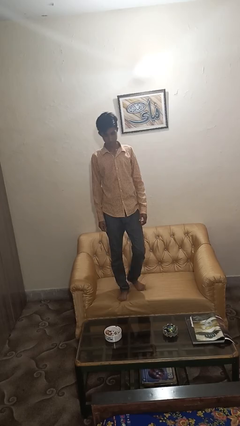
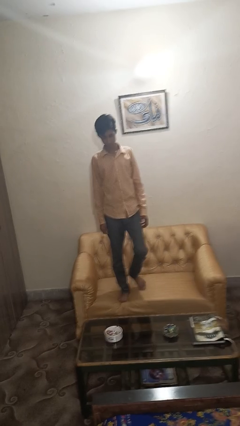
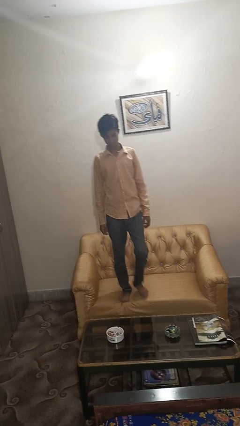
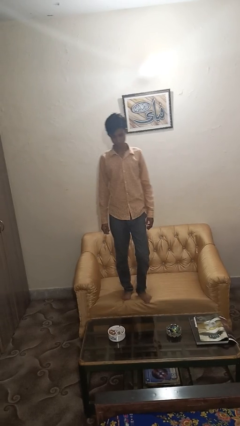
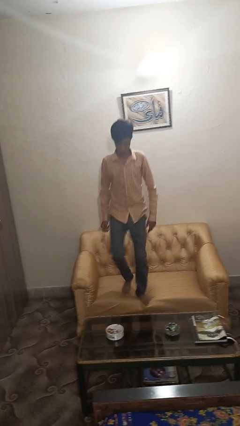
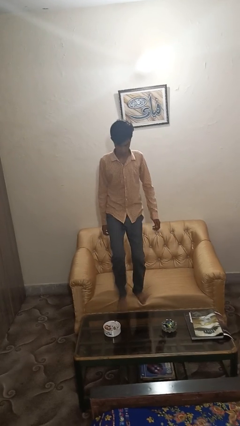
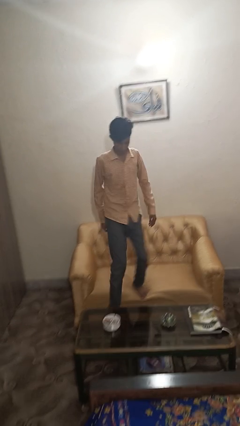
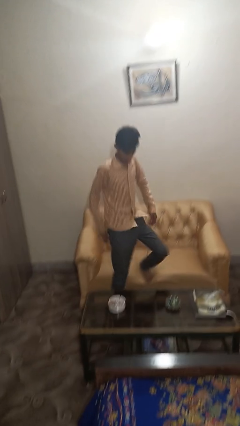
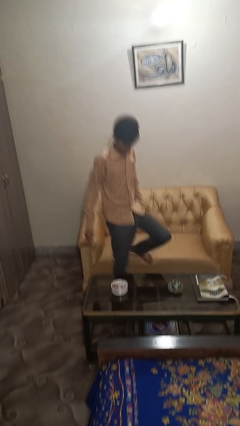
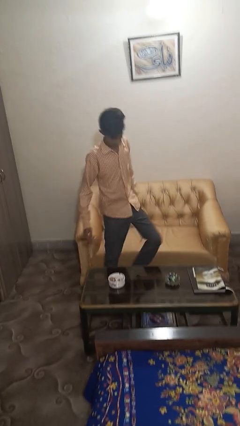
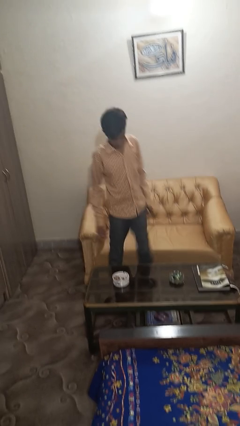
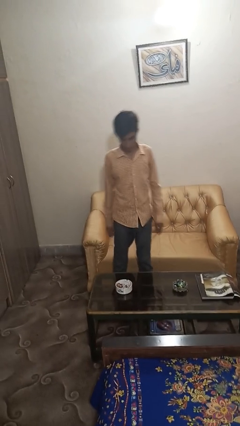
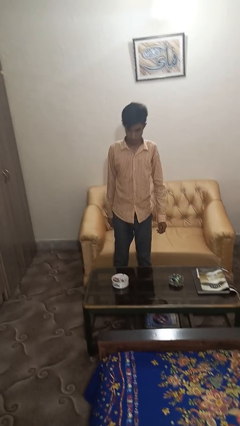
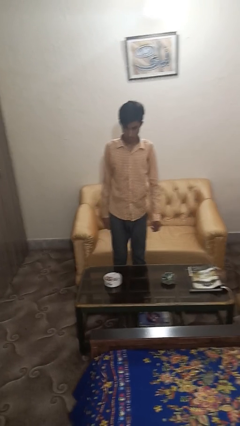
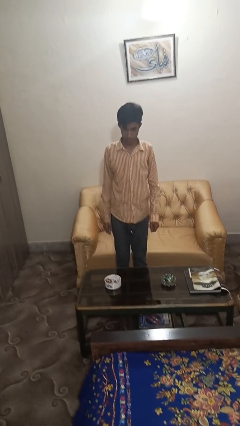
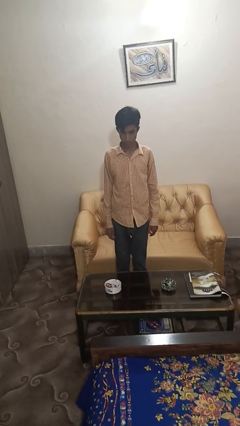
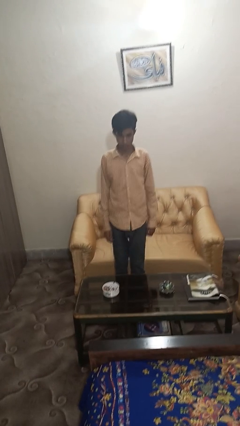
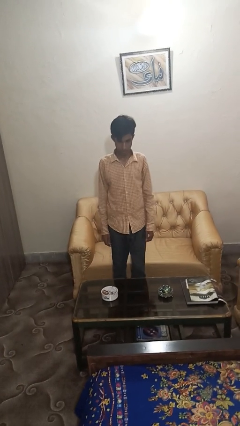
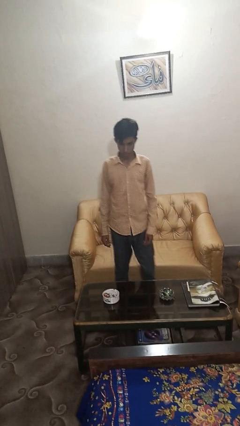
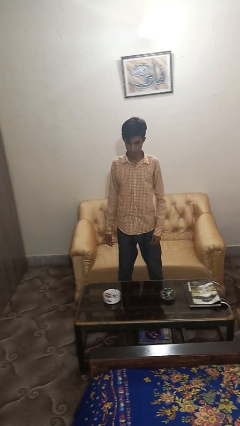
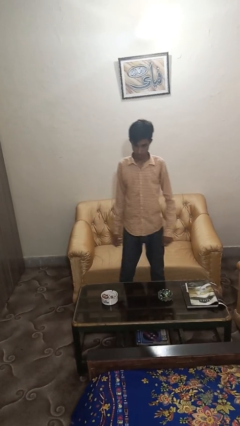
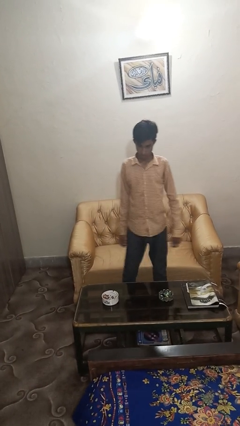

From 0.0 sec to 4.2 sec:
person climbs off couch

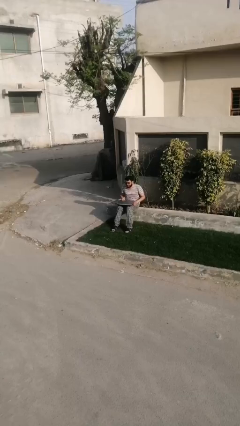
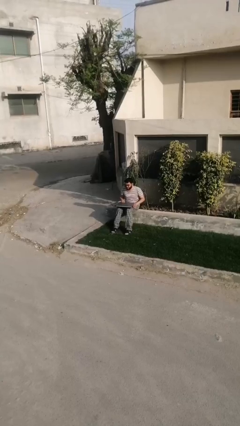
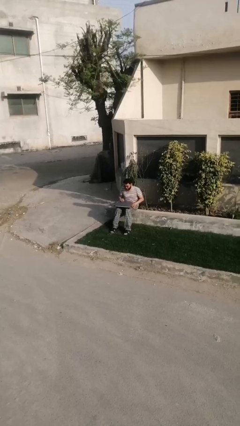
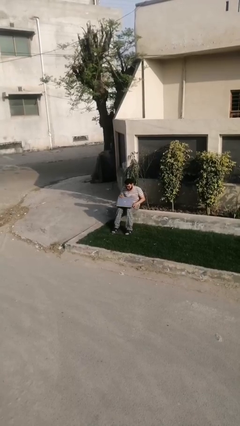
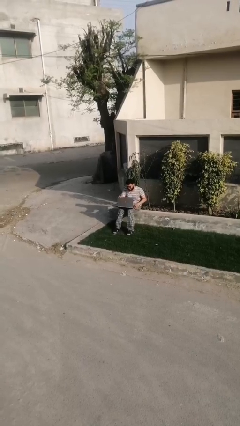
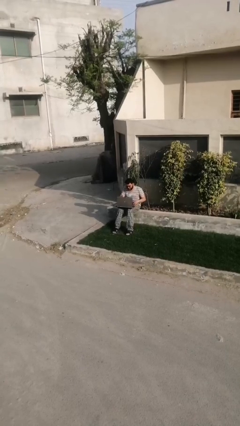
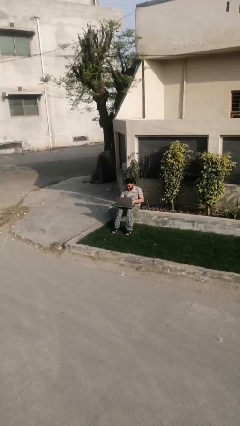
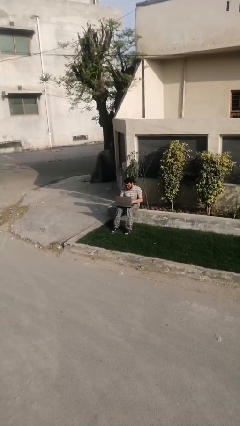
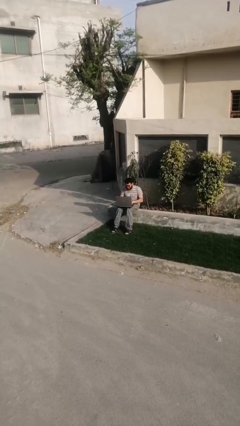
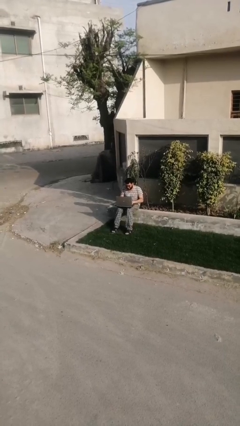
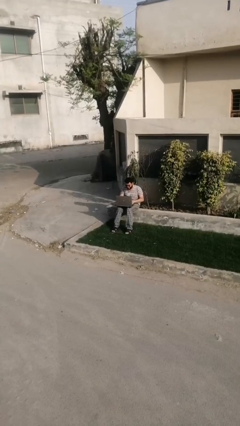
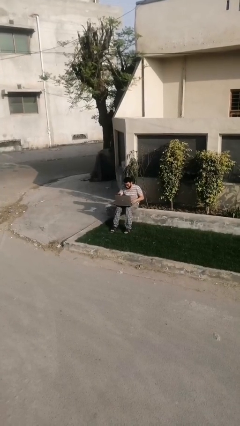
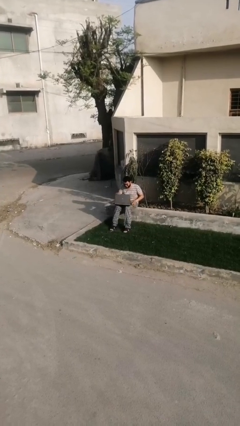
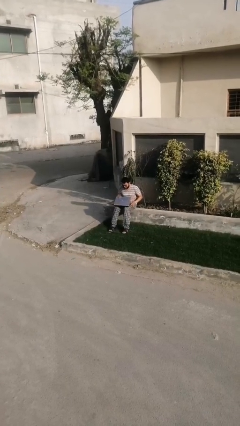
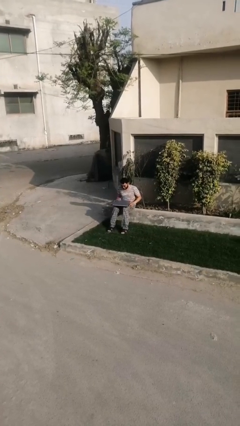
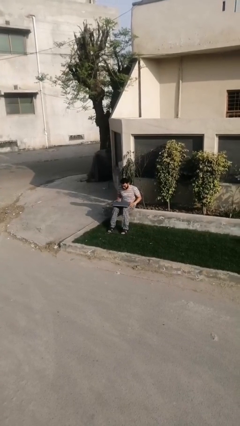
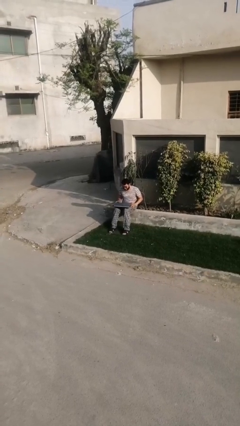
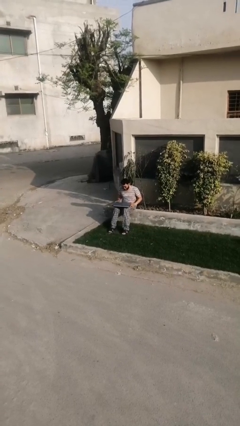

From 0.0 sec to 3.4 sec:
person interacts with laptop

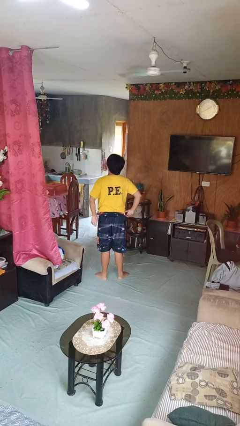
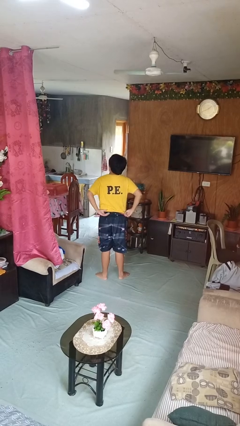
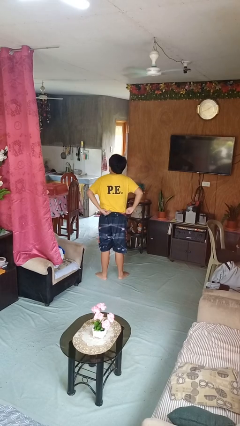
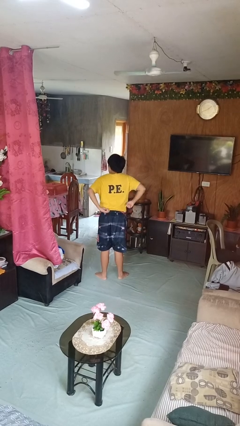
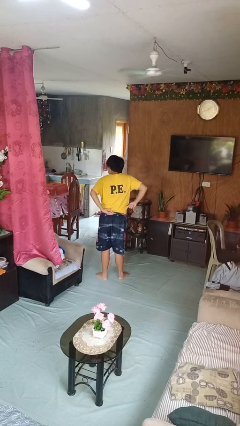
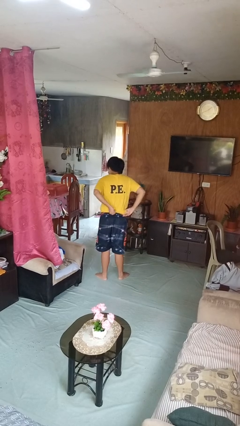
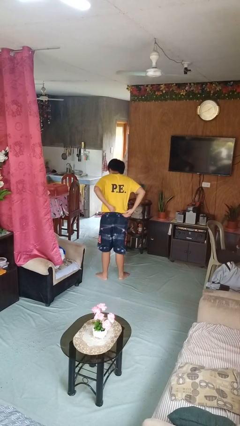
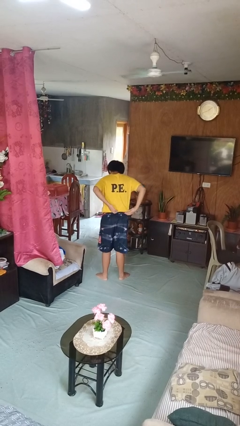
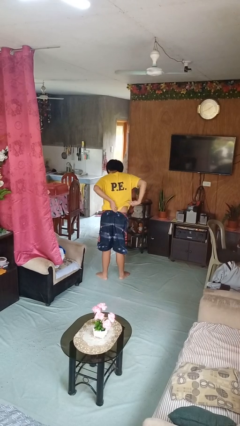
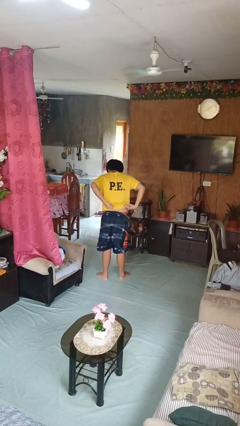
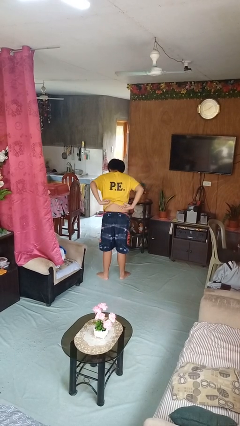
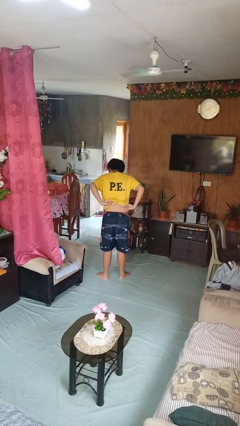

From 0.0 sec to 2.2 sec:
person untucks shirt

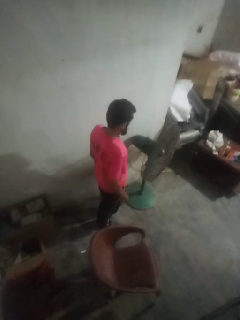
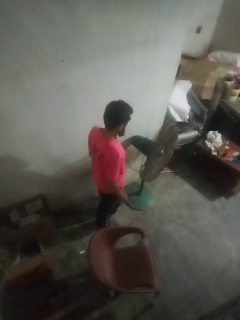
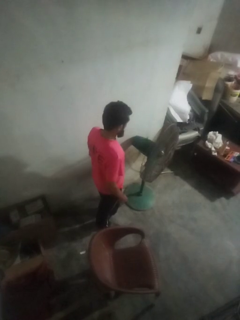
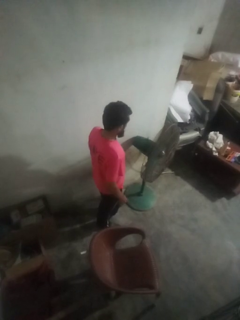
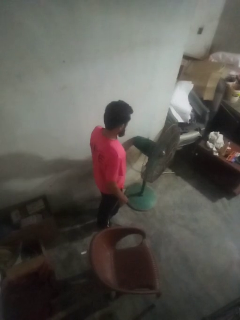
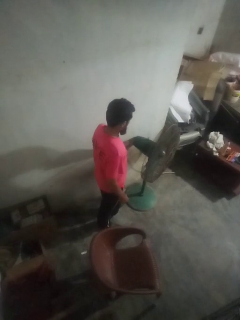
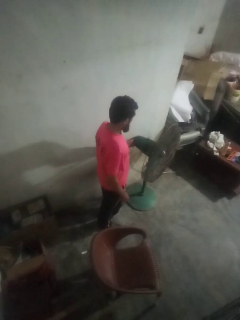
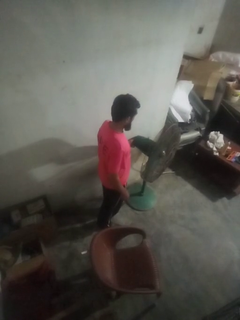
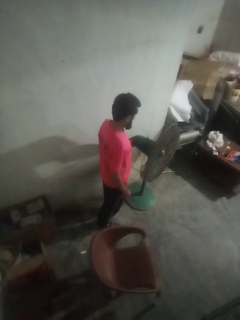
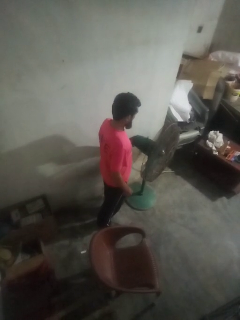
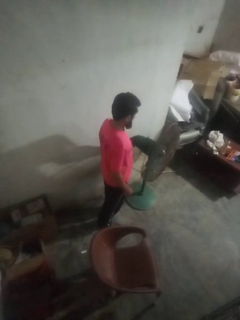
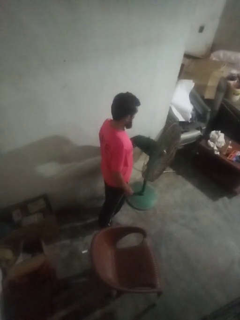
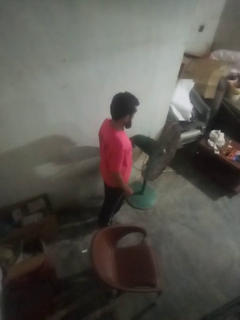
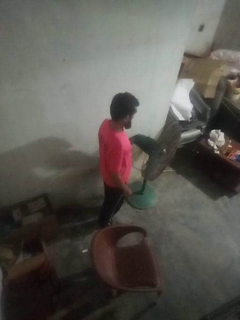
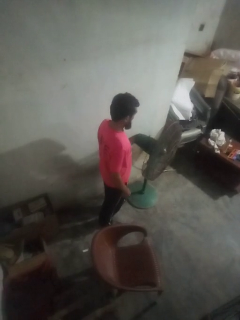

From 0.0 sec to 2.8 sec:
person turns off fan

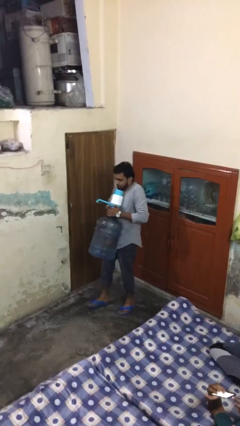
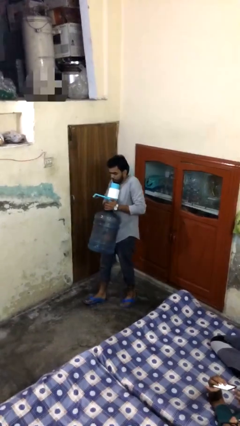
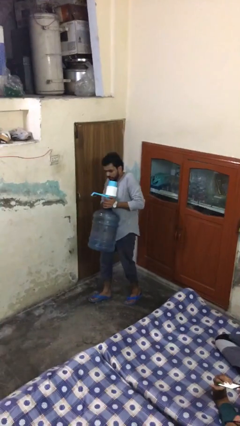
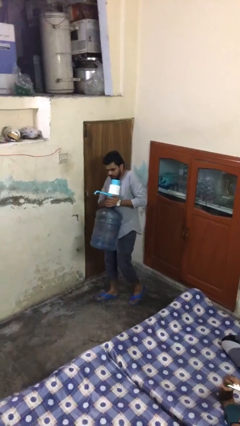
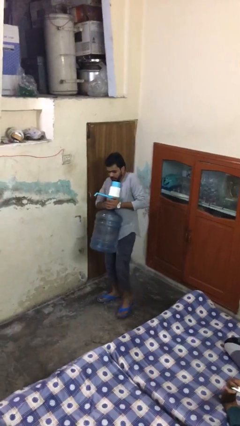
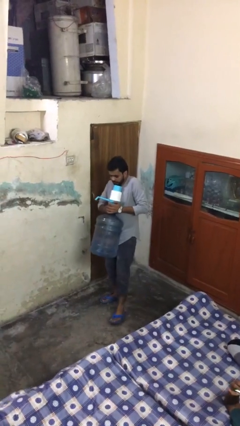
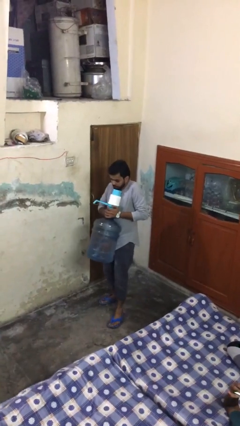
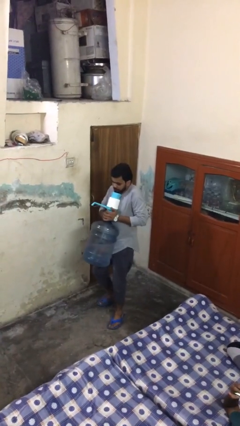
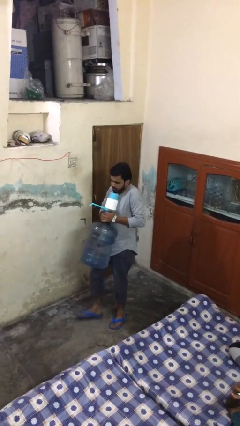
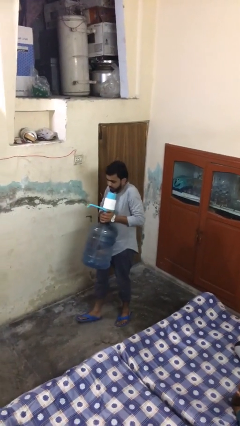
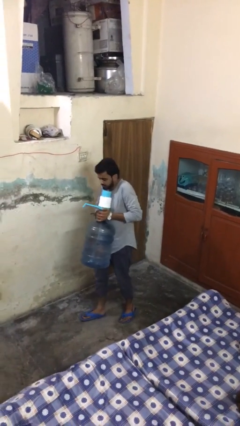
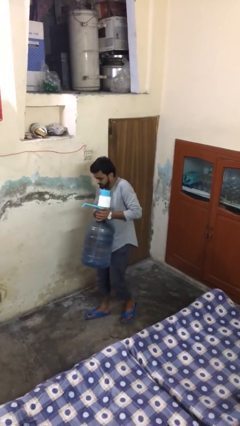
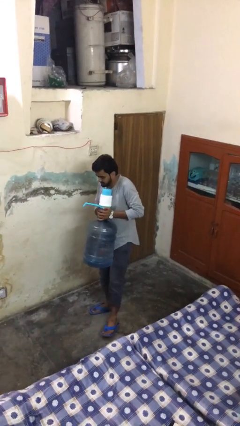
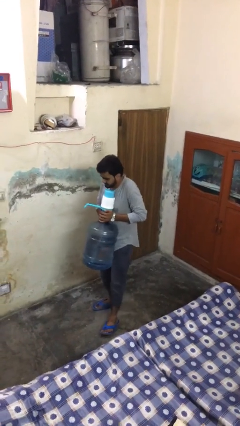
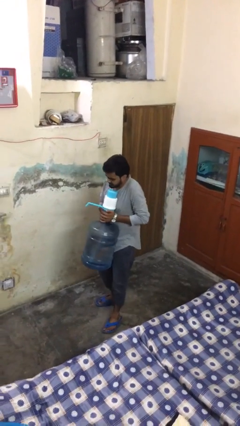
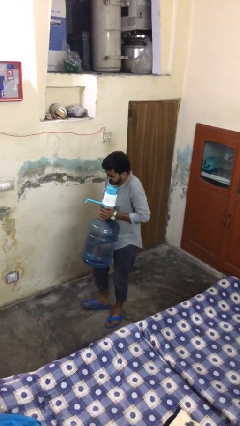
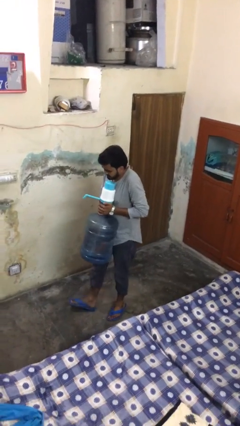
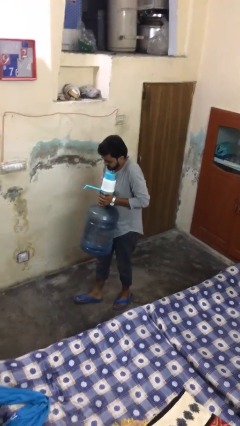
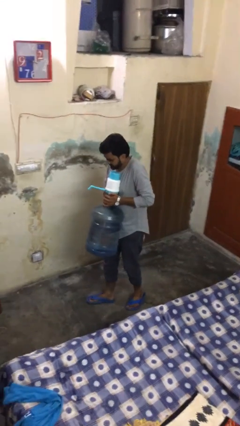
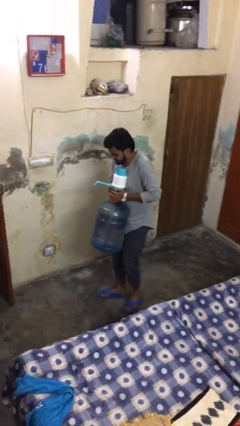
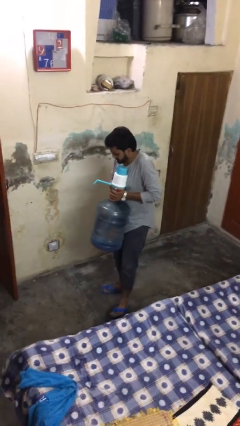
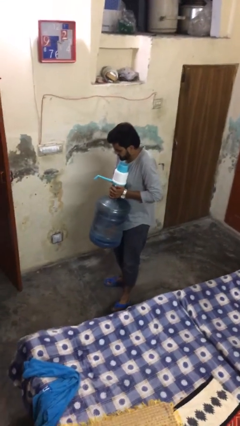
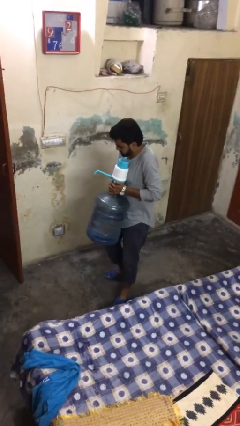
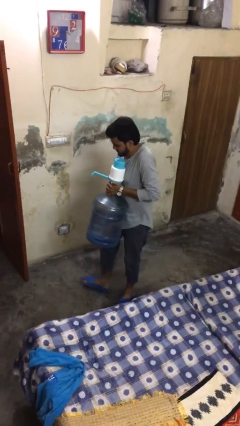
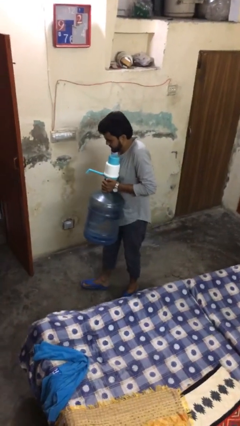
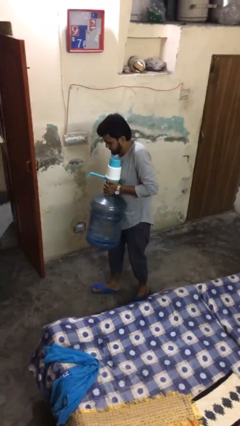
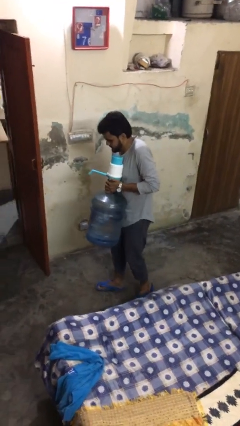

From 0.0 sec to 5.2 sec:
person carries heavy object

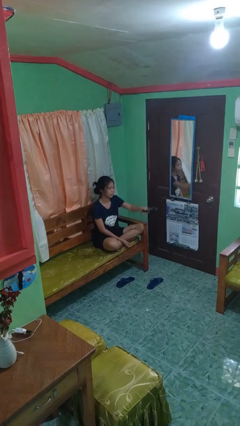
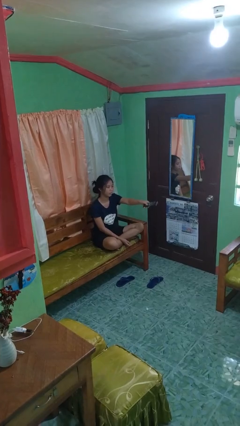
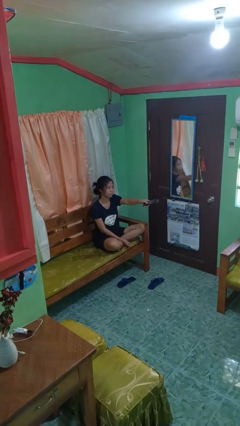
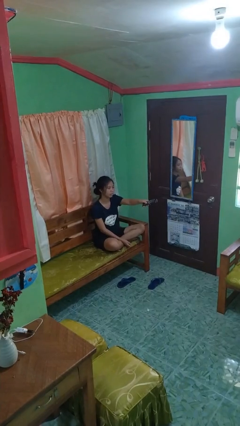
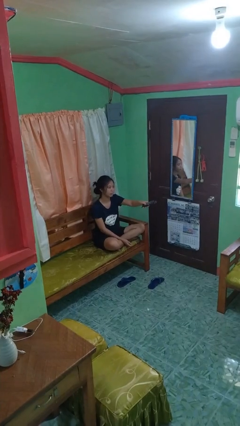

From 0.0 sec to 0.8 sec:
person uses television remote
